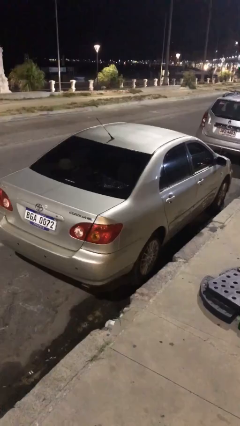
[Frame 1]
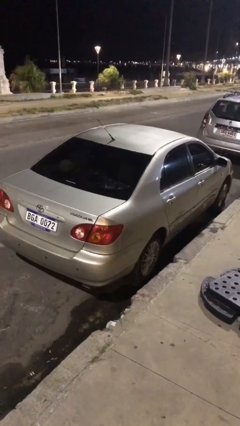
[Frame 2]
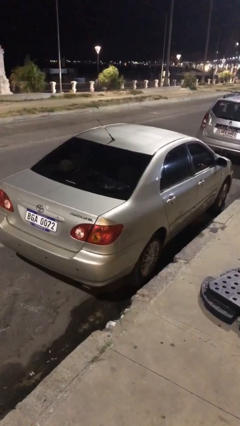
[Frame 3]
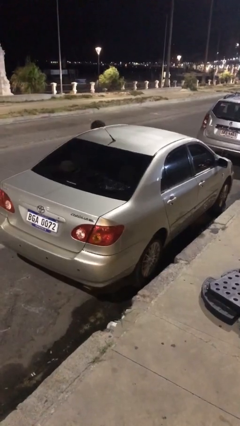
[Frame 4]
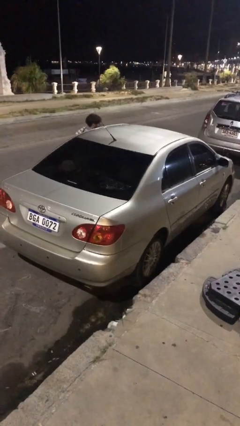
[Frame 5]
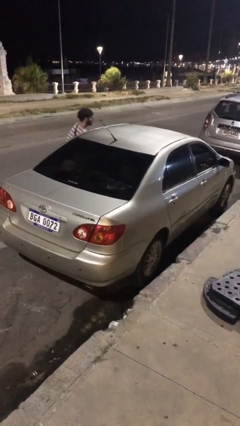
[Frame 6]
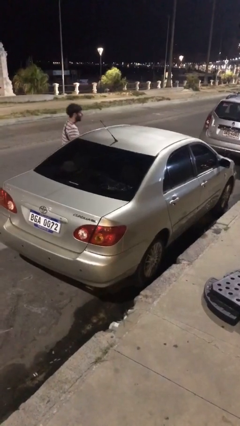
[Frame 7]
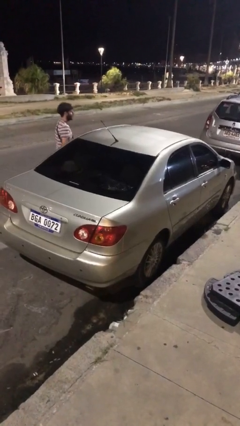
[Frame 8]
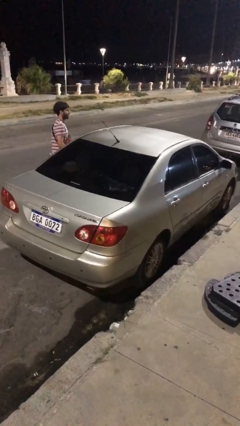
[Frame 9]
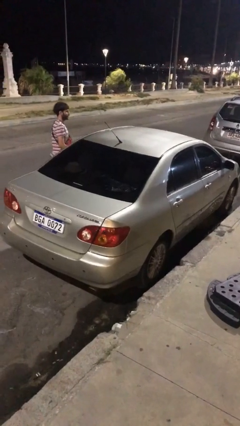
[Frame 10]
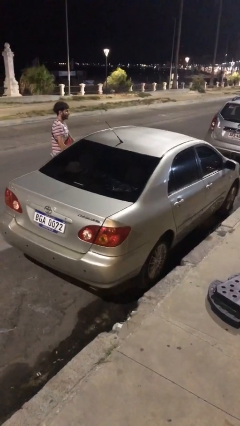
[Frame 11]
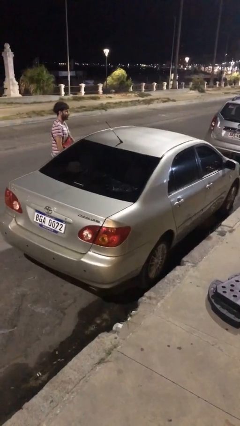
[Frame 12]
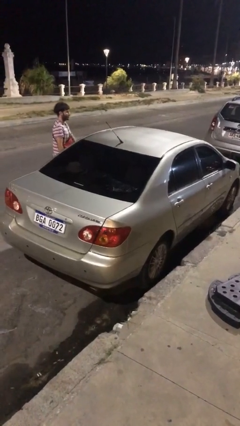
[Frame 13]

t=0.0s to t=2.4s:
car drops off person

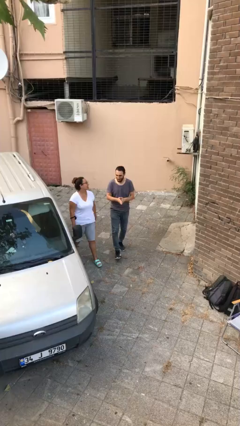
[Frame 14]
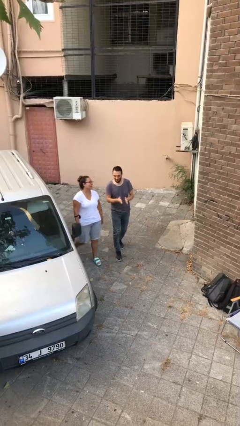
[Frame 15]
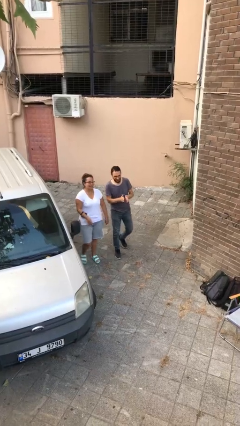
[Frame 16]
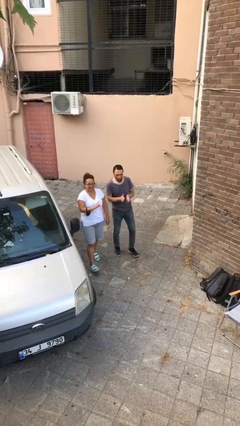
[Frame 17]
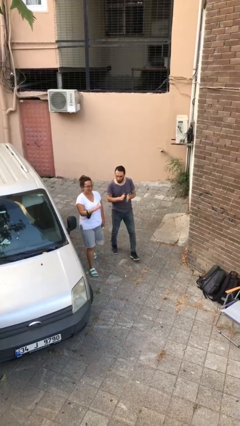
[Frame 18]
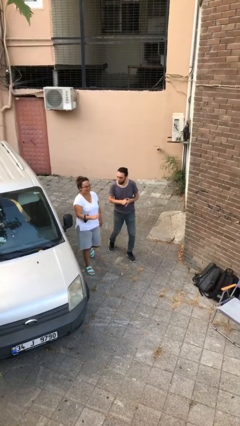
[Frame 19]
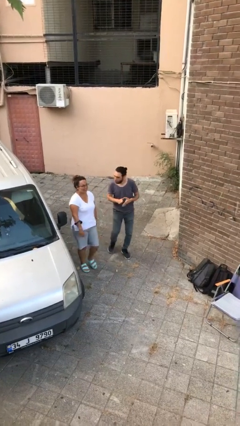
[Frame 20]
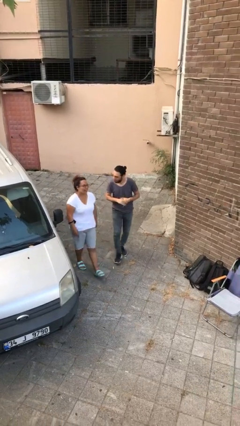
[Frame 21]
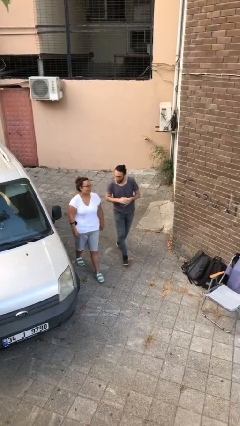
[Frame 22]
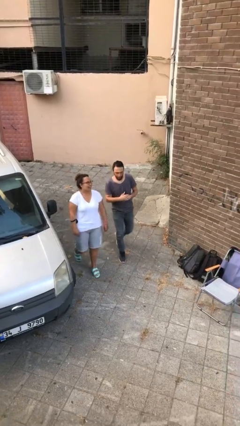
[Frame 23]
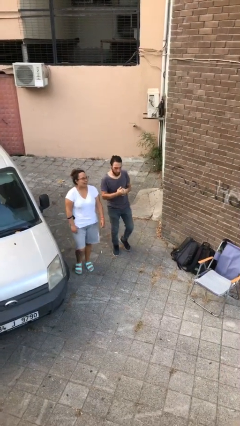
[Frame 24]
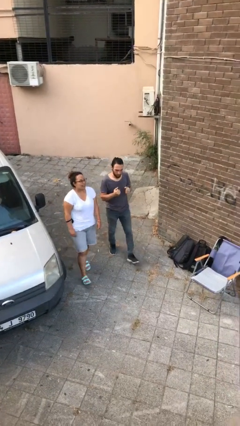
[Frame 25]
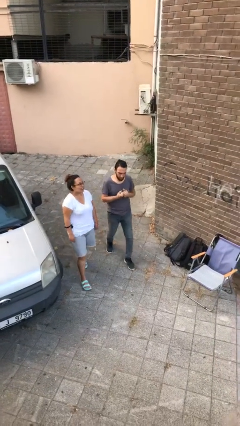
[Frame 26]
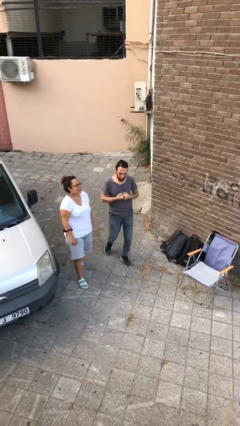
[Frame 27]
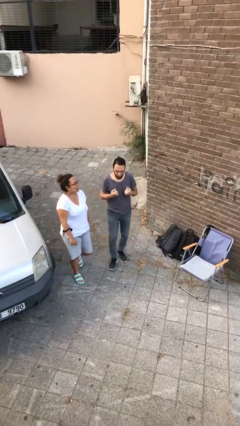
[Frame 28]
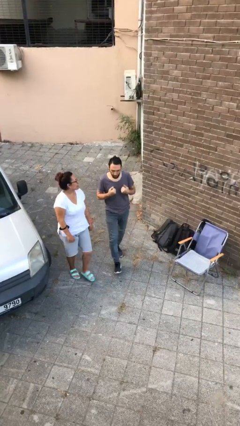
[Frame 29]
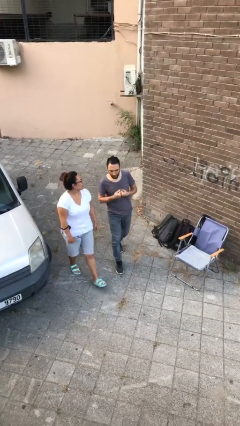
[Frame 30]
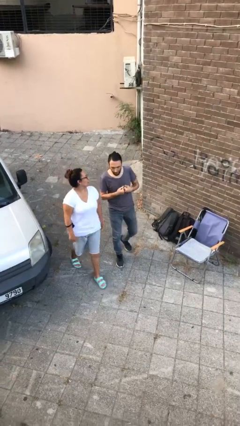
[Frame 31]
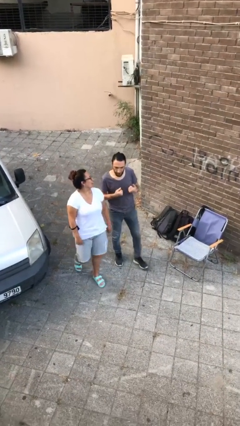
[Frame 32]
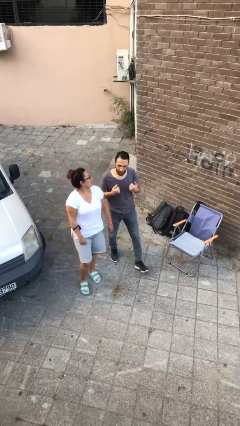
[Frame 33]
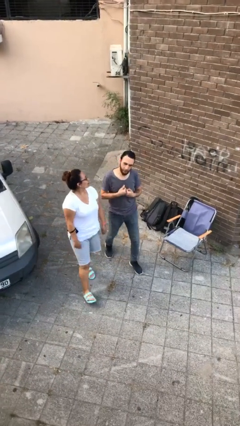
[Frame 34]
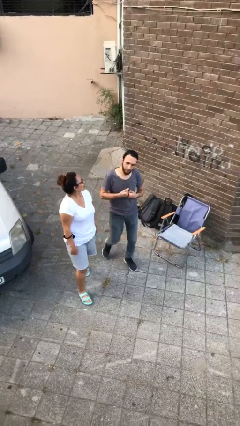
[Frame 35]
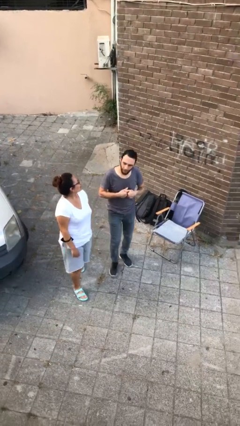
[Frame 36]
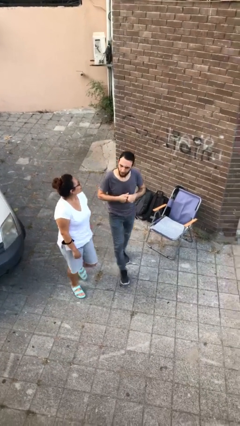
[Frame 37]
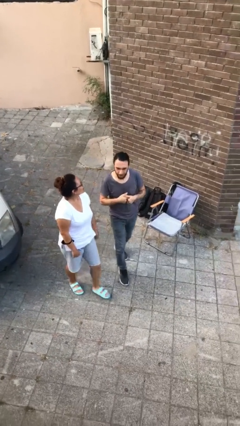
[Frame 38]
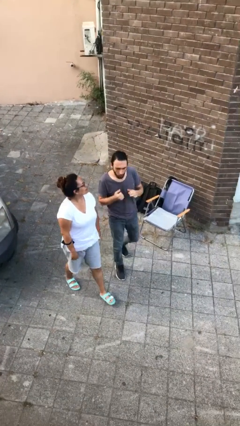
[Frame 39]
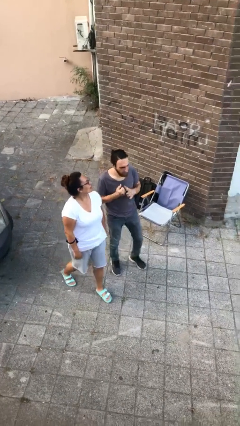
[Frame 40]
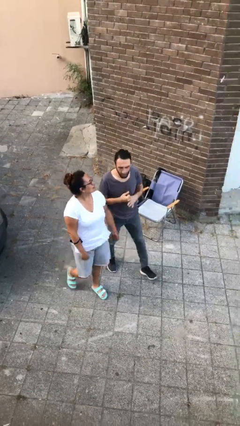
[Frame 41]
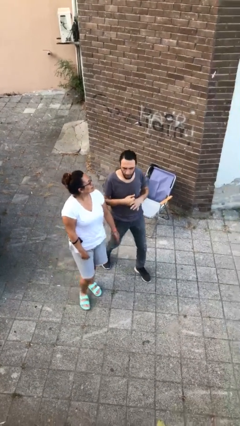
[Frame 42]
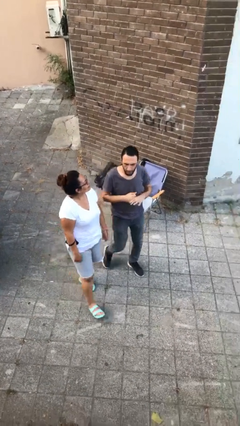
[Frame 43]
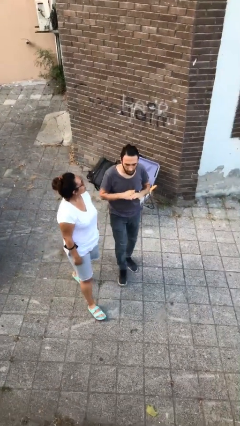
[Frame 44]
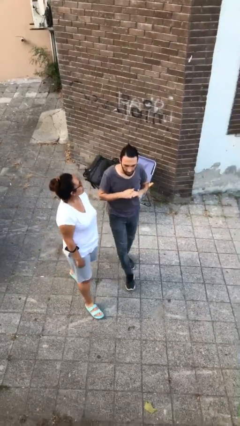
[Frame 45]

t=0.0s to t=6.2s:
person talks to person

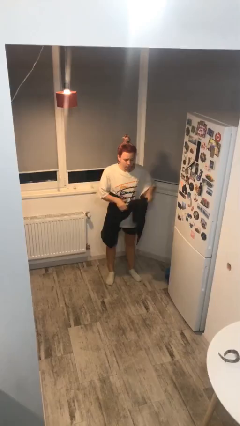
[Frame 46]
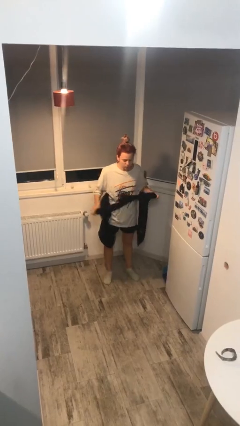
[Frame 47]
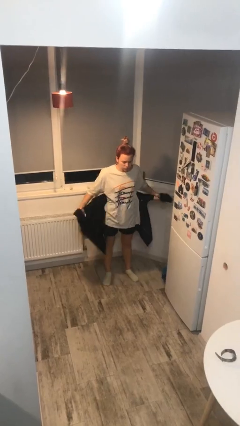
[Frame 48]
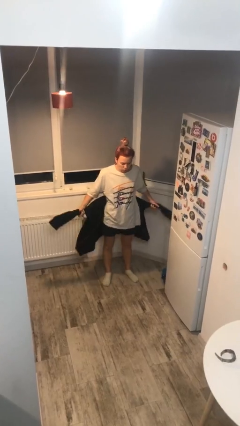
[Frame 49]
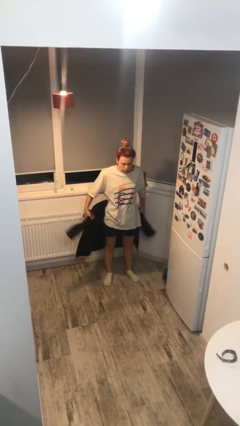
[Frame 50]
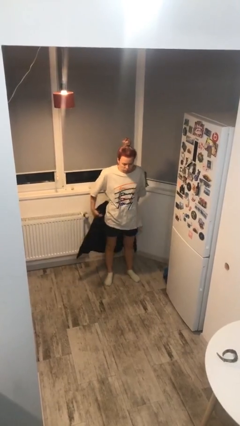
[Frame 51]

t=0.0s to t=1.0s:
person unties jacket around waist

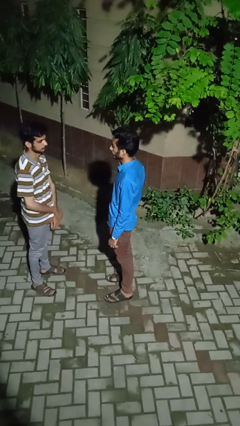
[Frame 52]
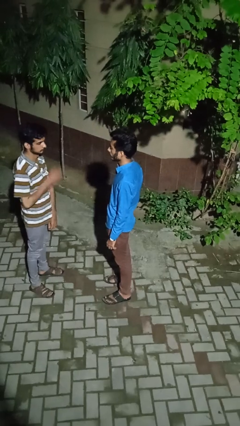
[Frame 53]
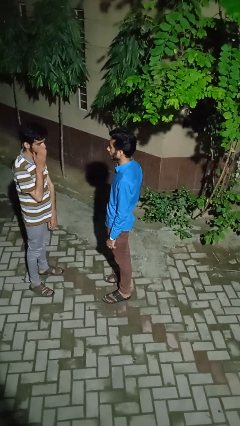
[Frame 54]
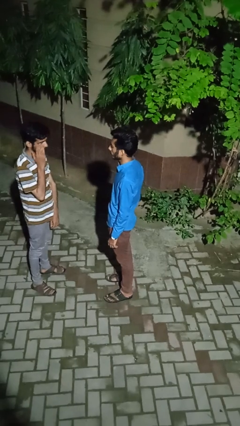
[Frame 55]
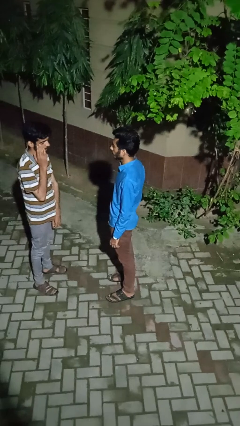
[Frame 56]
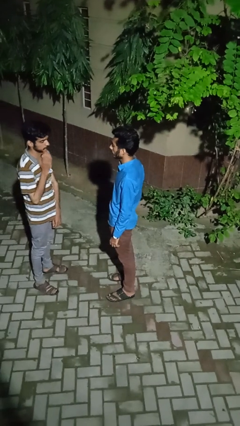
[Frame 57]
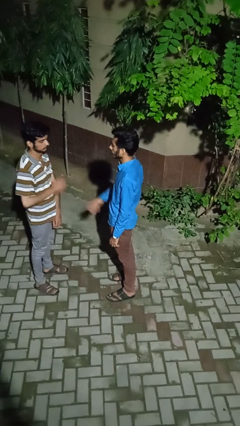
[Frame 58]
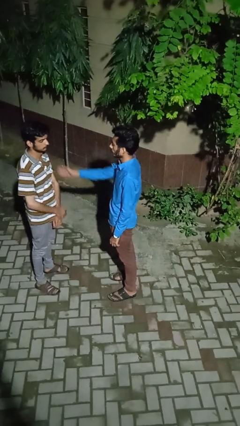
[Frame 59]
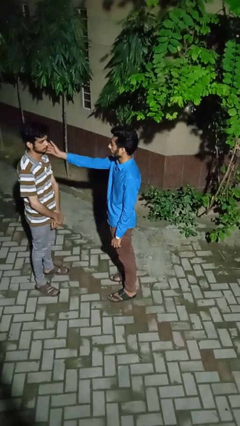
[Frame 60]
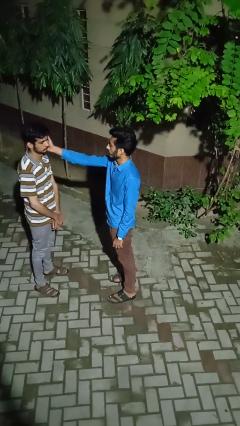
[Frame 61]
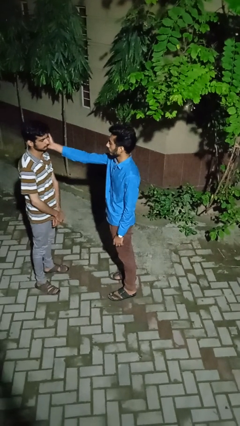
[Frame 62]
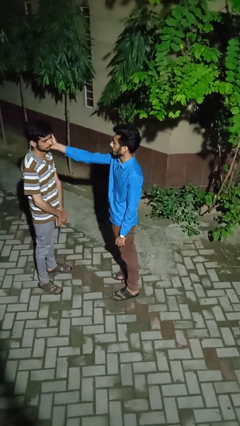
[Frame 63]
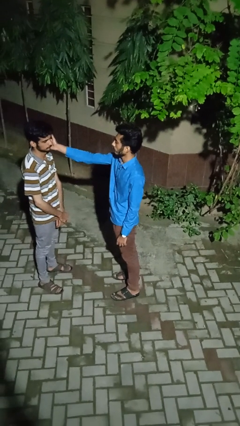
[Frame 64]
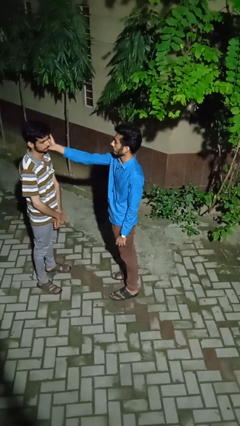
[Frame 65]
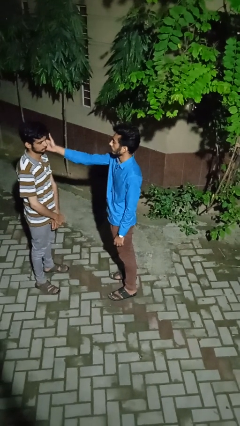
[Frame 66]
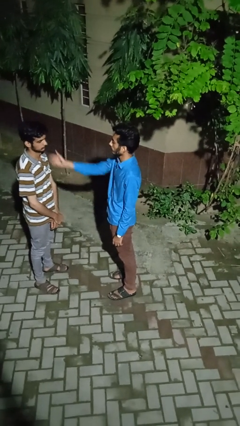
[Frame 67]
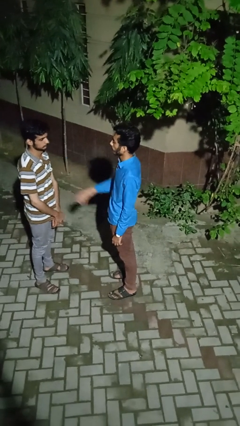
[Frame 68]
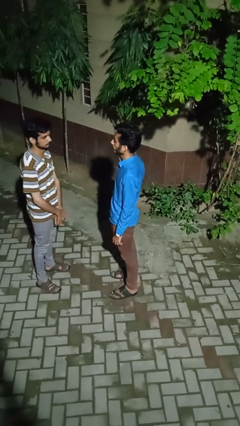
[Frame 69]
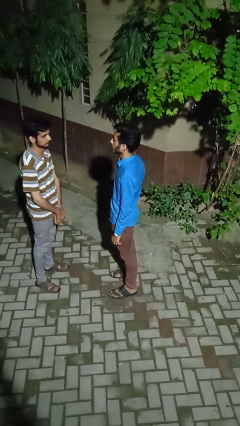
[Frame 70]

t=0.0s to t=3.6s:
person touches face of person

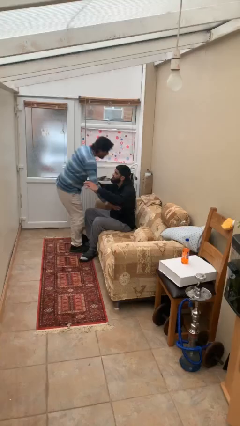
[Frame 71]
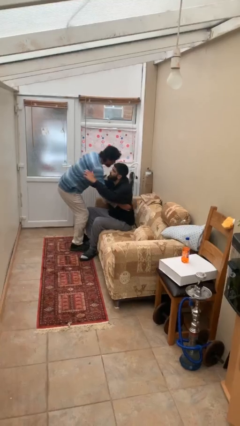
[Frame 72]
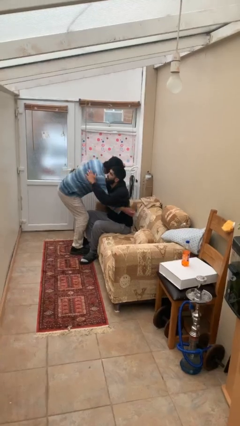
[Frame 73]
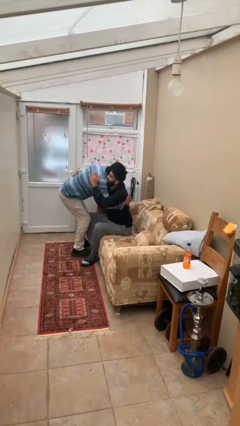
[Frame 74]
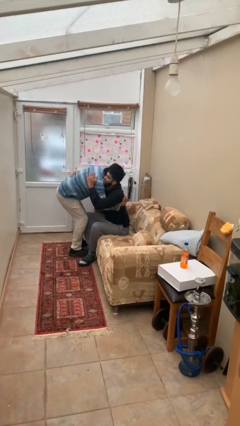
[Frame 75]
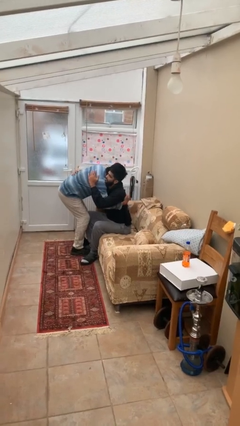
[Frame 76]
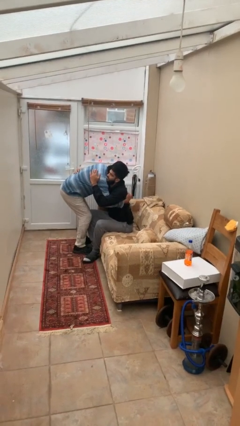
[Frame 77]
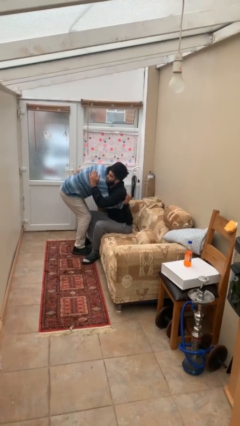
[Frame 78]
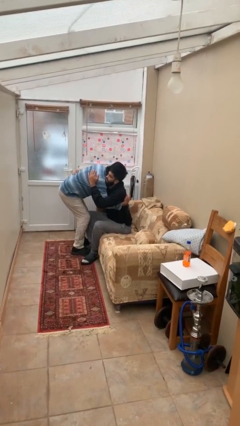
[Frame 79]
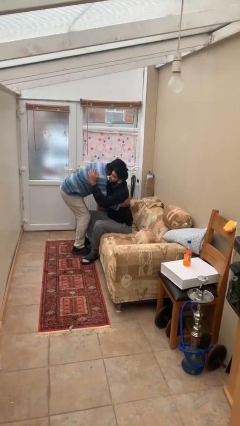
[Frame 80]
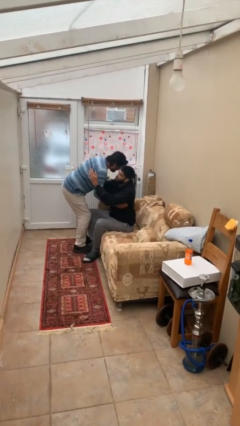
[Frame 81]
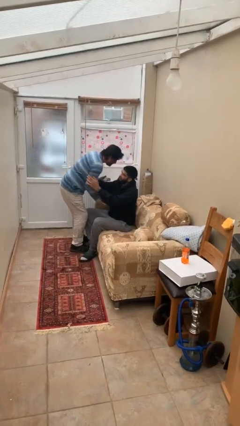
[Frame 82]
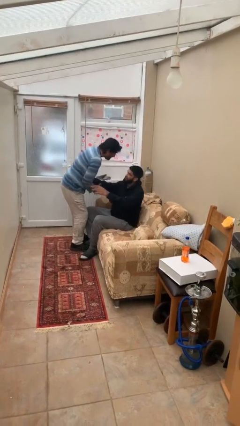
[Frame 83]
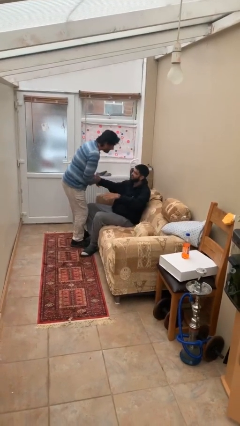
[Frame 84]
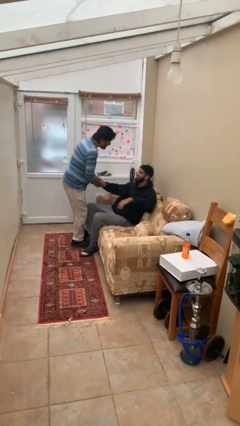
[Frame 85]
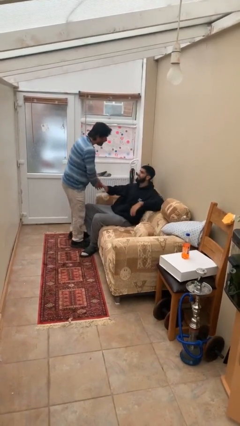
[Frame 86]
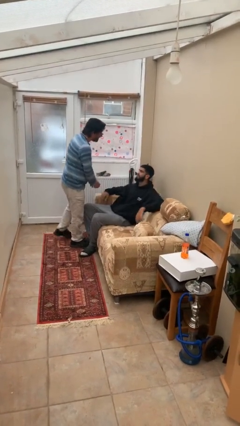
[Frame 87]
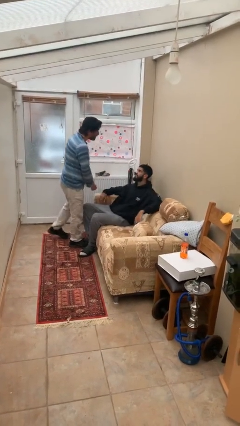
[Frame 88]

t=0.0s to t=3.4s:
person embraces person

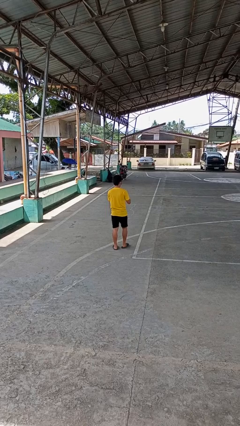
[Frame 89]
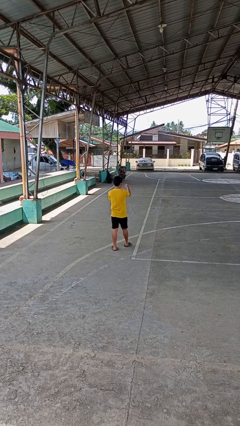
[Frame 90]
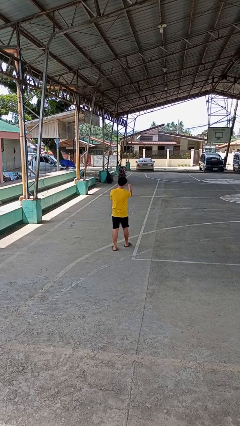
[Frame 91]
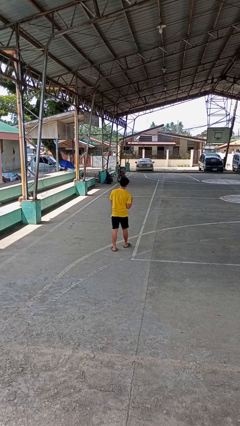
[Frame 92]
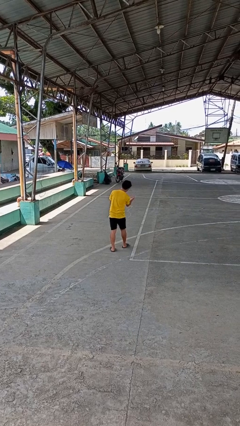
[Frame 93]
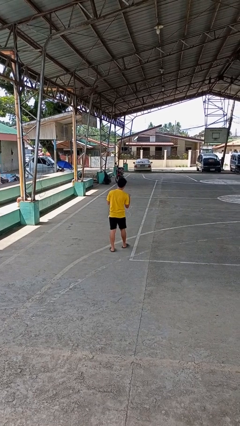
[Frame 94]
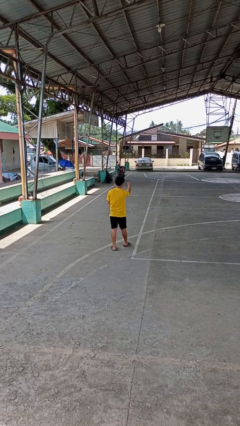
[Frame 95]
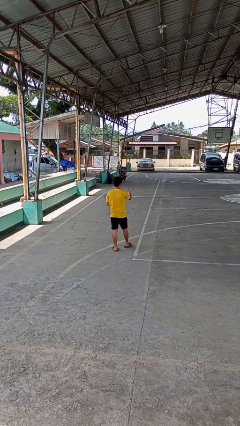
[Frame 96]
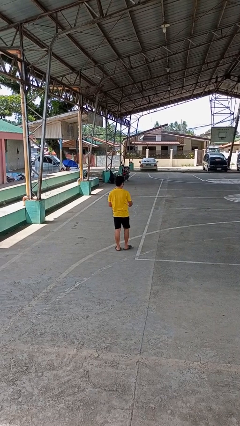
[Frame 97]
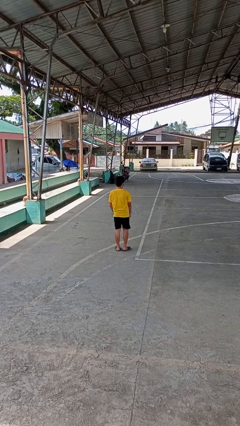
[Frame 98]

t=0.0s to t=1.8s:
person punches
